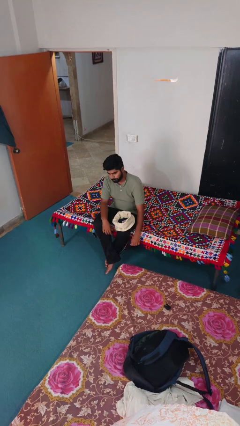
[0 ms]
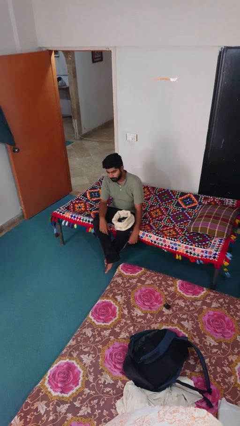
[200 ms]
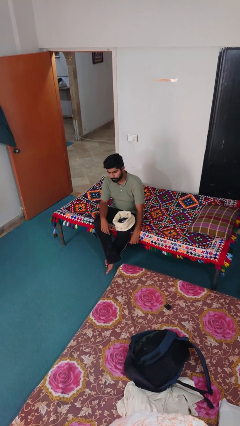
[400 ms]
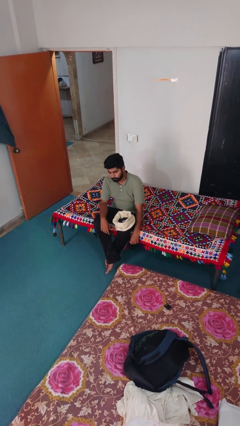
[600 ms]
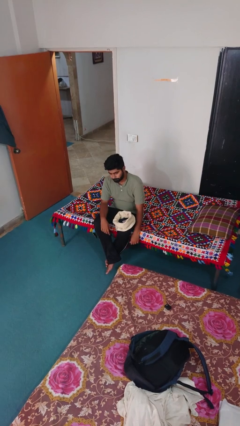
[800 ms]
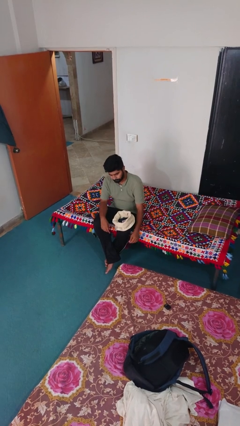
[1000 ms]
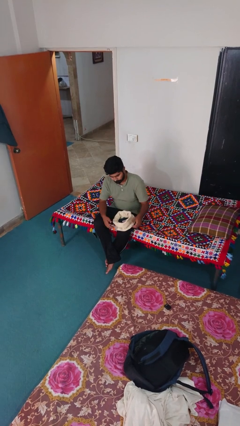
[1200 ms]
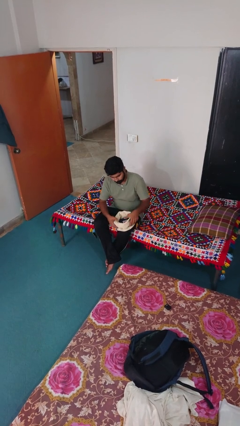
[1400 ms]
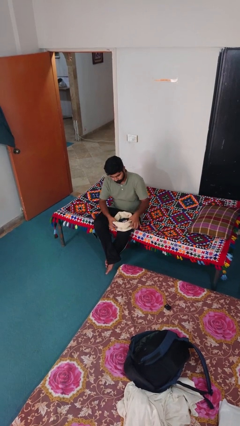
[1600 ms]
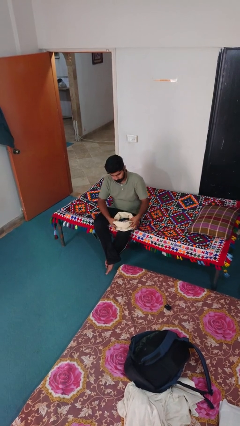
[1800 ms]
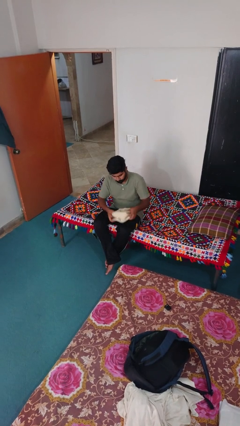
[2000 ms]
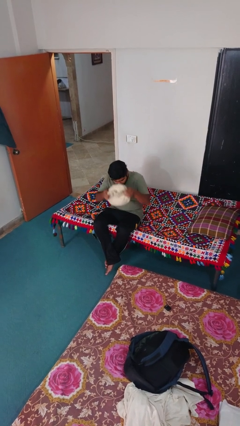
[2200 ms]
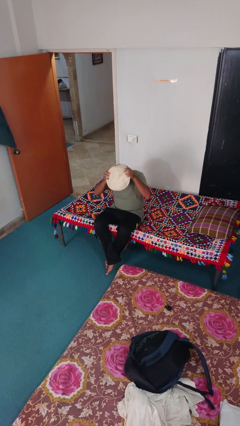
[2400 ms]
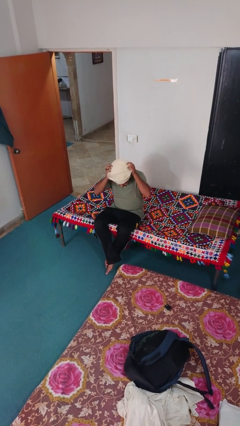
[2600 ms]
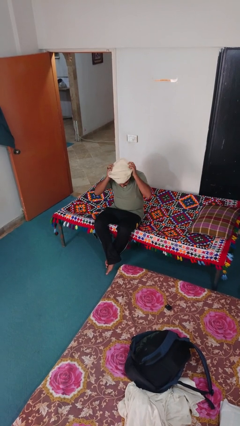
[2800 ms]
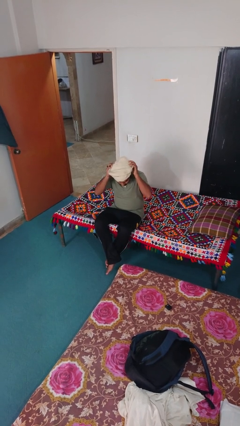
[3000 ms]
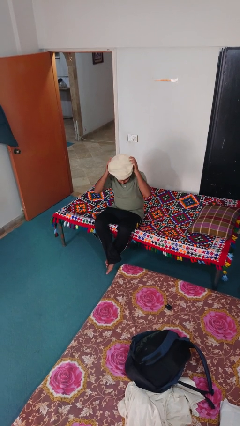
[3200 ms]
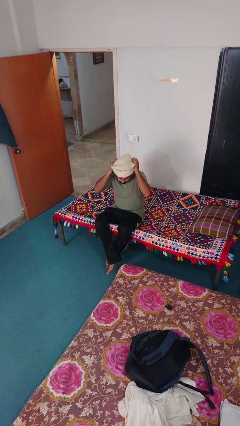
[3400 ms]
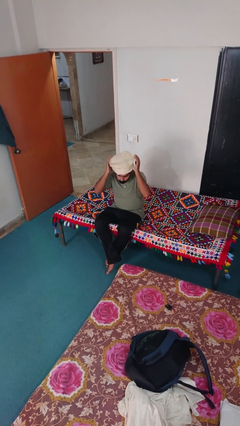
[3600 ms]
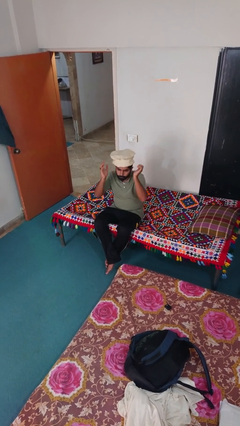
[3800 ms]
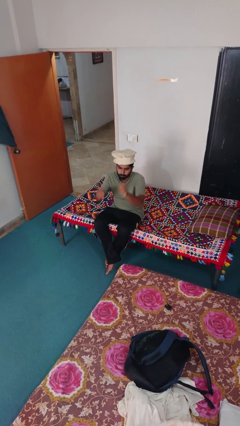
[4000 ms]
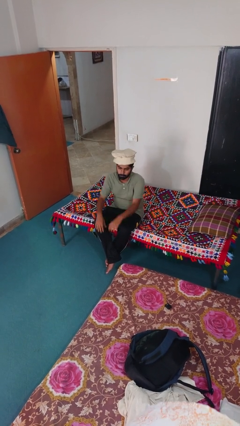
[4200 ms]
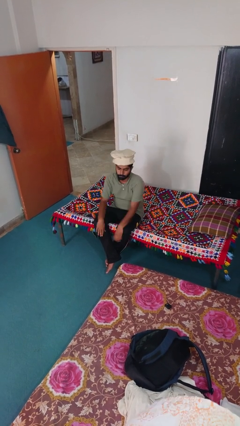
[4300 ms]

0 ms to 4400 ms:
person puts on hat

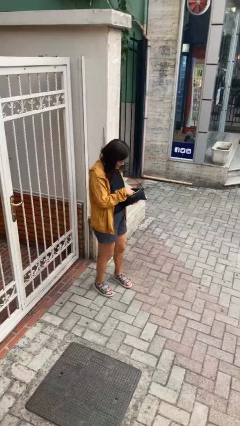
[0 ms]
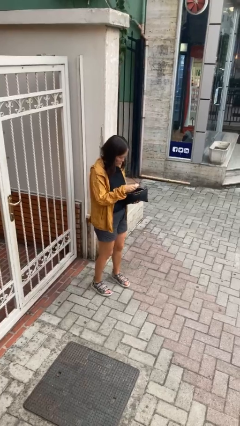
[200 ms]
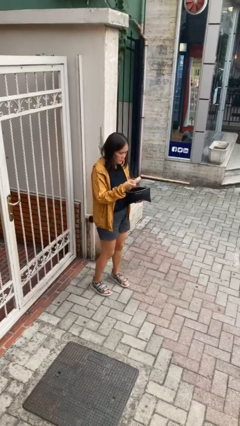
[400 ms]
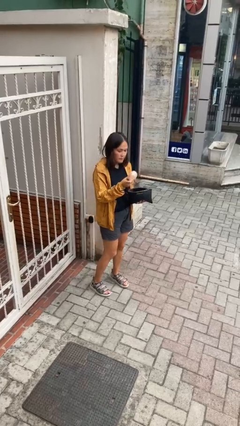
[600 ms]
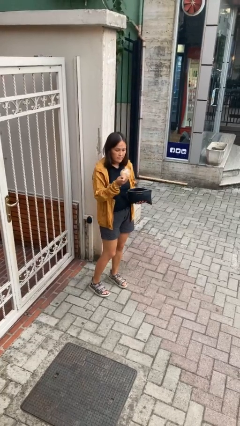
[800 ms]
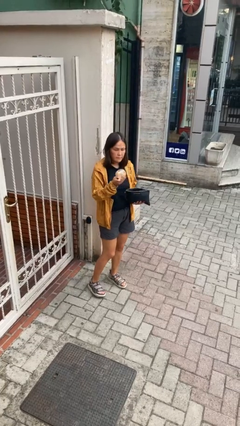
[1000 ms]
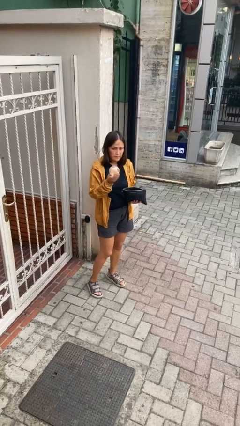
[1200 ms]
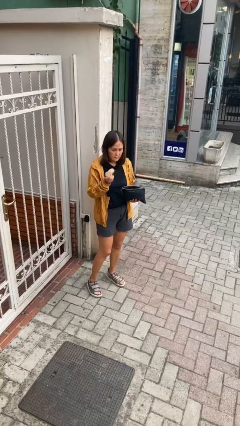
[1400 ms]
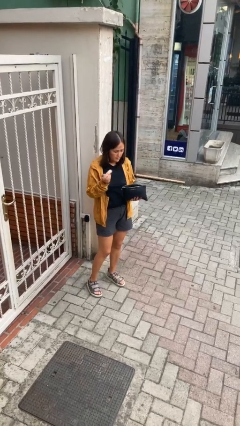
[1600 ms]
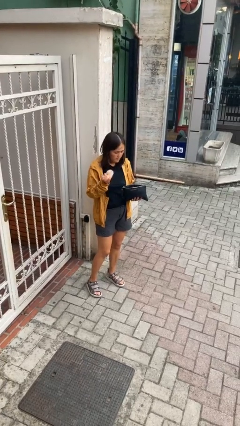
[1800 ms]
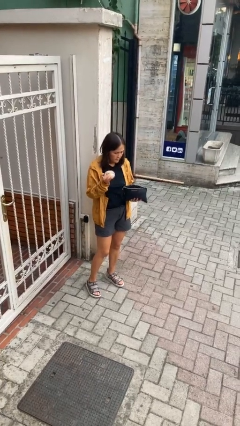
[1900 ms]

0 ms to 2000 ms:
person takes object from purse

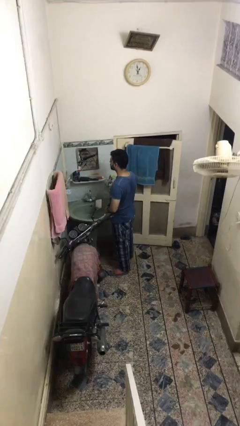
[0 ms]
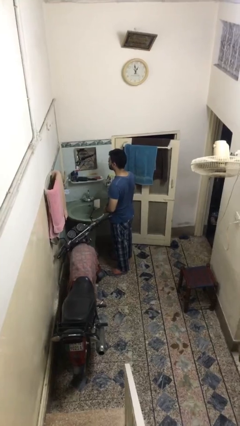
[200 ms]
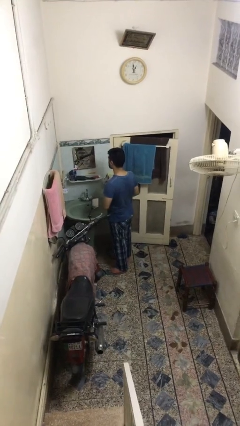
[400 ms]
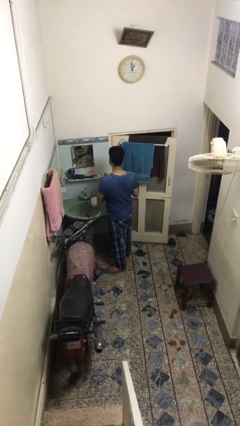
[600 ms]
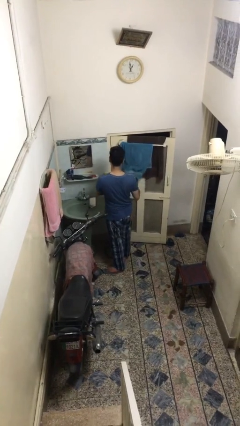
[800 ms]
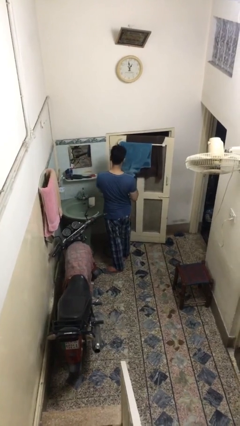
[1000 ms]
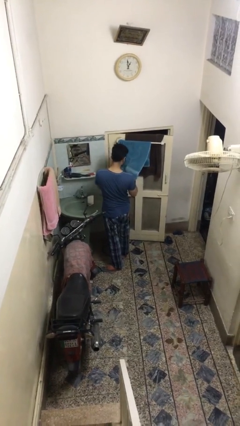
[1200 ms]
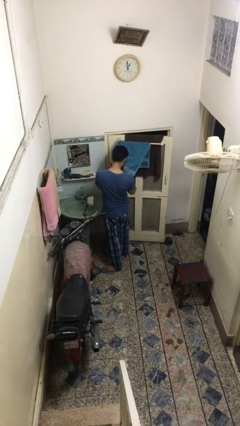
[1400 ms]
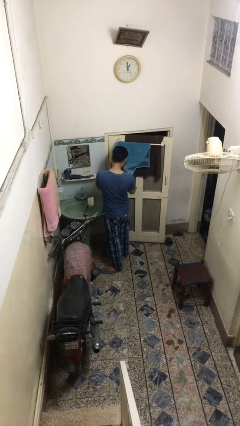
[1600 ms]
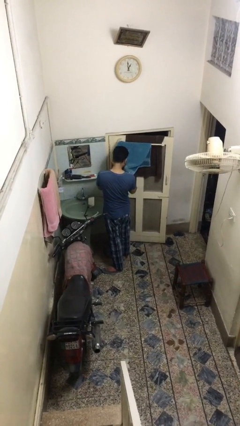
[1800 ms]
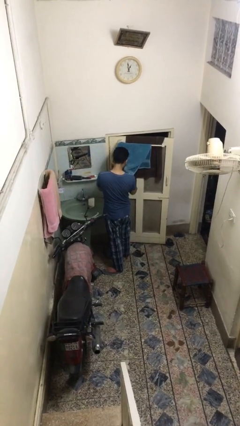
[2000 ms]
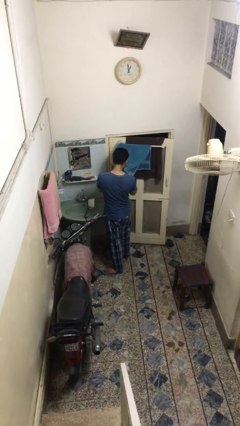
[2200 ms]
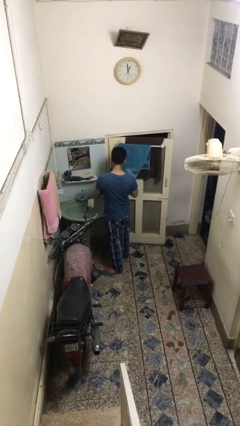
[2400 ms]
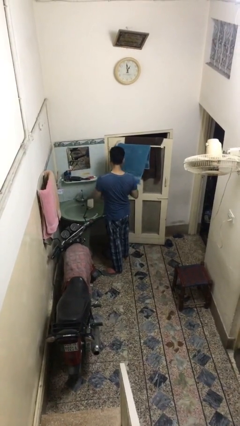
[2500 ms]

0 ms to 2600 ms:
person dries face with towel

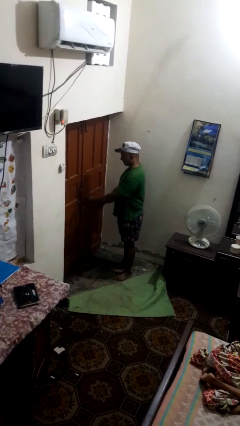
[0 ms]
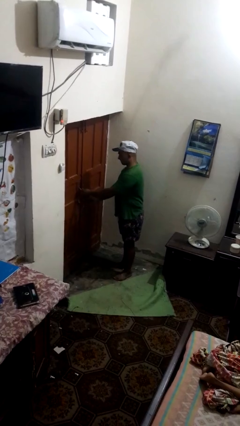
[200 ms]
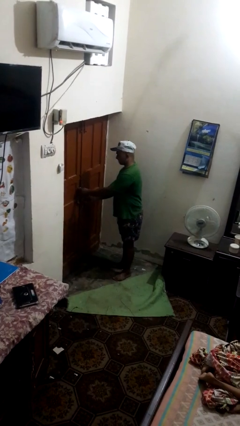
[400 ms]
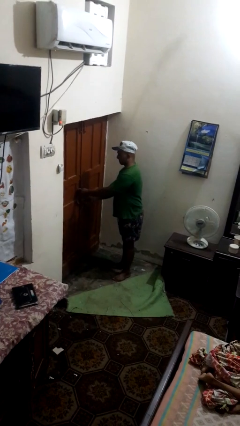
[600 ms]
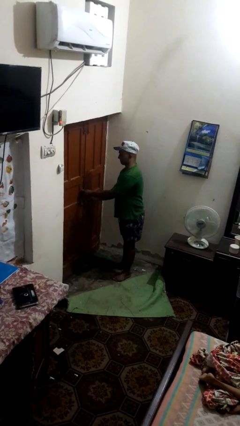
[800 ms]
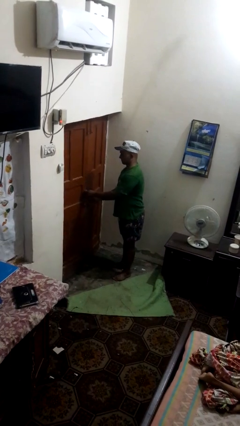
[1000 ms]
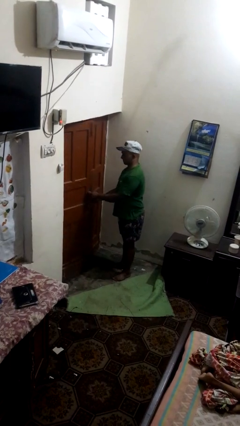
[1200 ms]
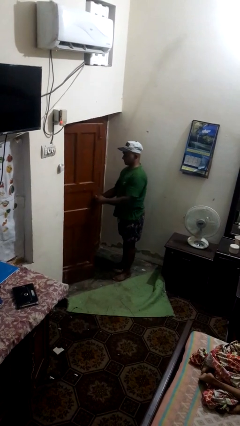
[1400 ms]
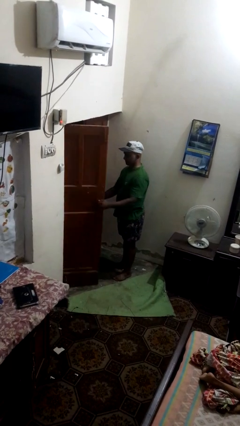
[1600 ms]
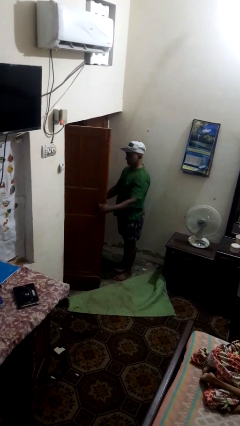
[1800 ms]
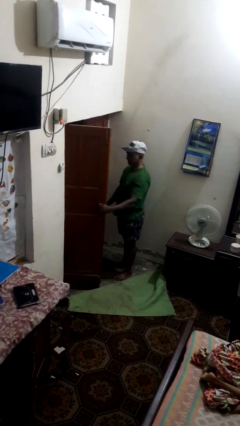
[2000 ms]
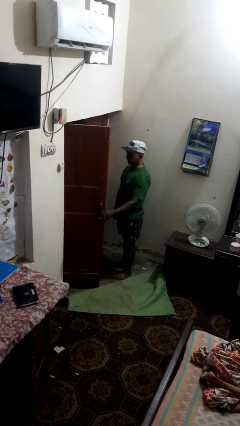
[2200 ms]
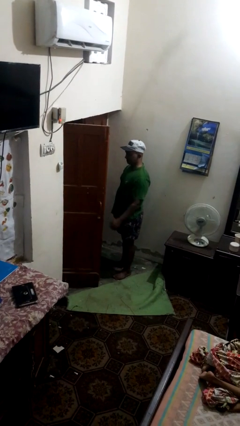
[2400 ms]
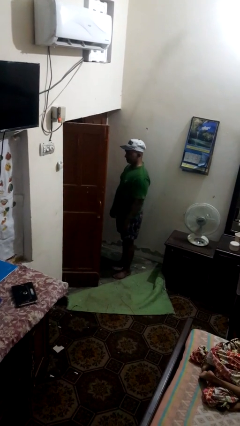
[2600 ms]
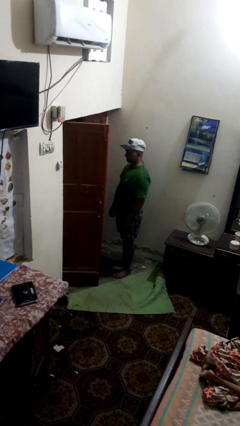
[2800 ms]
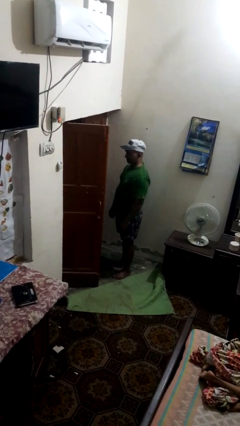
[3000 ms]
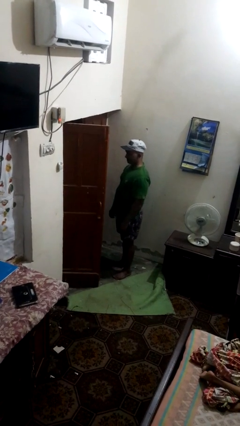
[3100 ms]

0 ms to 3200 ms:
person opens facility door

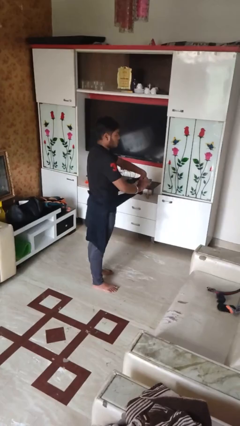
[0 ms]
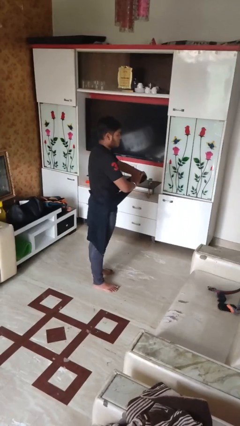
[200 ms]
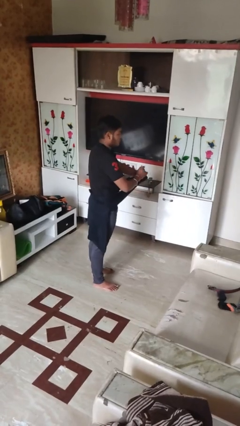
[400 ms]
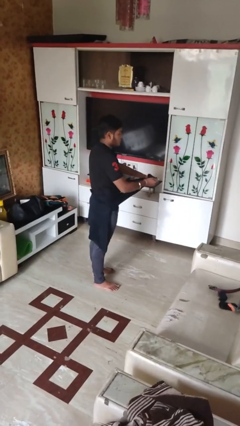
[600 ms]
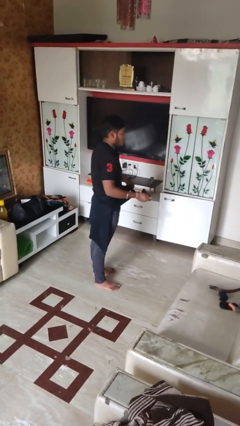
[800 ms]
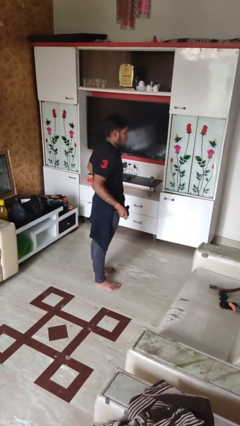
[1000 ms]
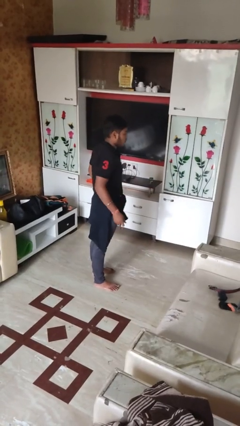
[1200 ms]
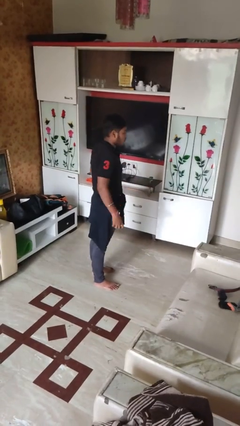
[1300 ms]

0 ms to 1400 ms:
person ties jacket around waist

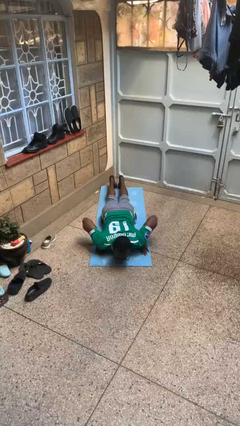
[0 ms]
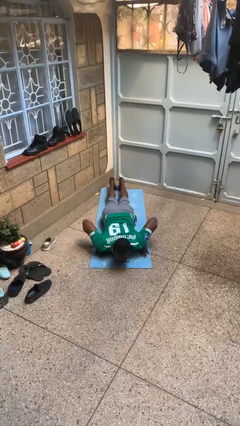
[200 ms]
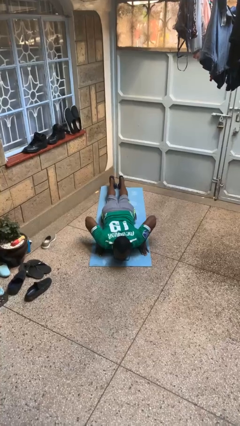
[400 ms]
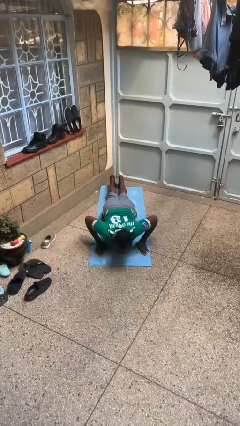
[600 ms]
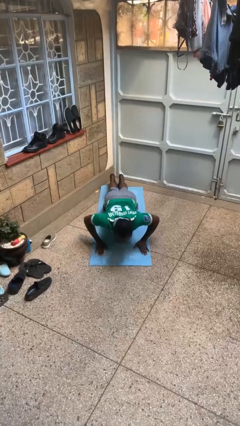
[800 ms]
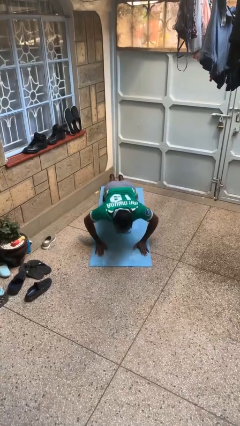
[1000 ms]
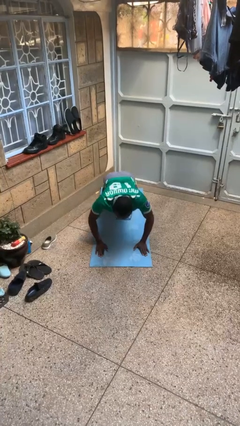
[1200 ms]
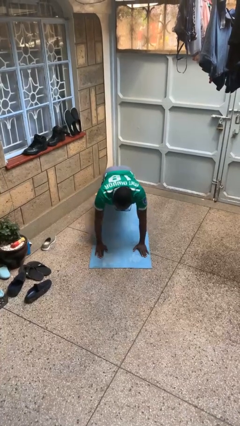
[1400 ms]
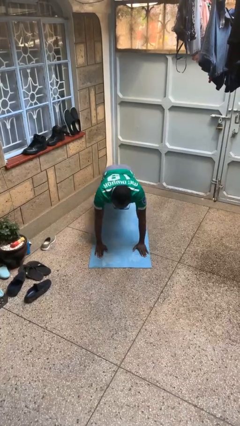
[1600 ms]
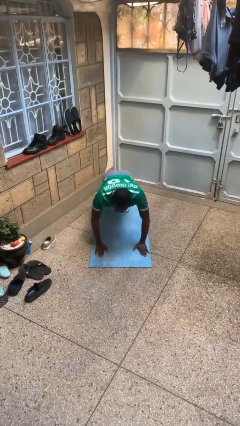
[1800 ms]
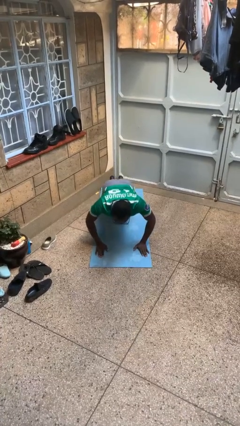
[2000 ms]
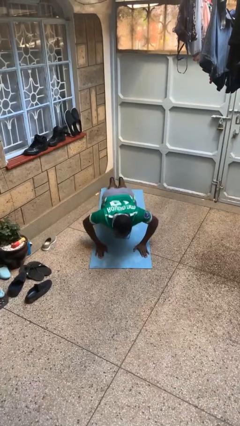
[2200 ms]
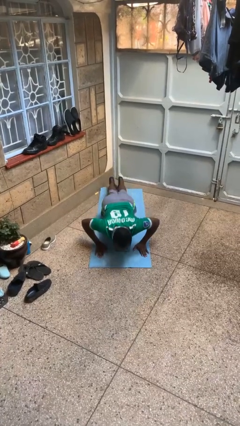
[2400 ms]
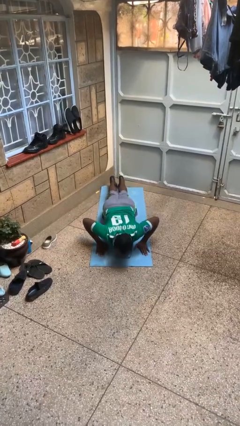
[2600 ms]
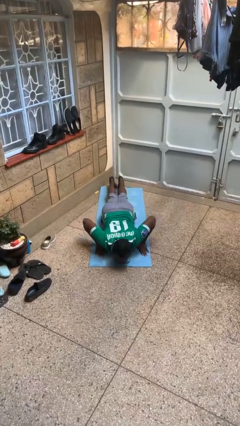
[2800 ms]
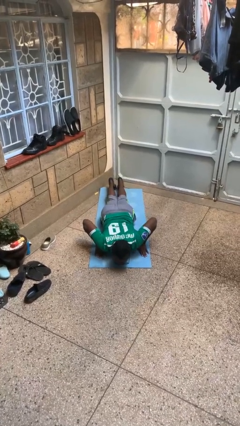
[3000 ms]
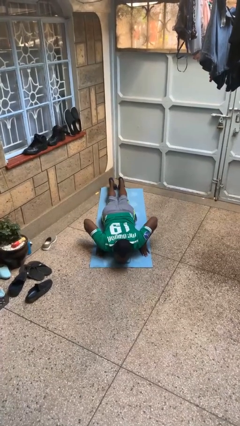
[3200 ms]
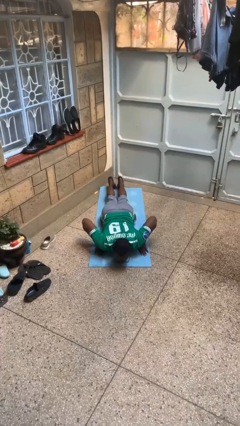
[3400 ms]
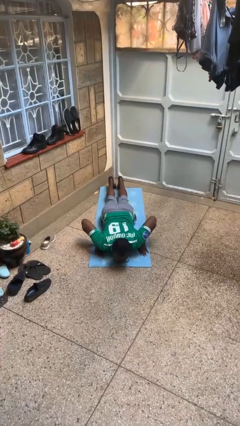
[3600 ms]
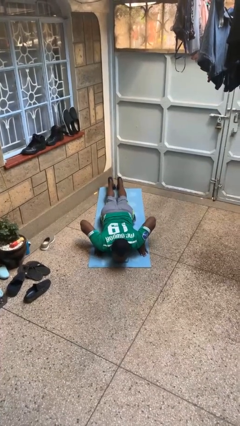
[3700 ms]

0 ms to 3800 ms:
person exercises with pushup
